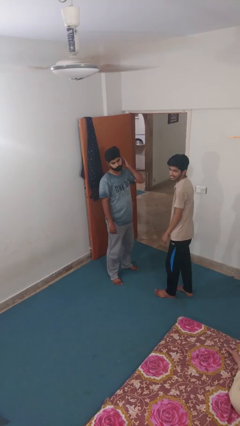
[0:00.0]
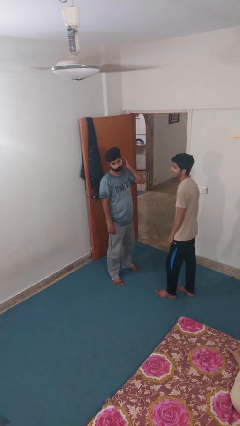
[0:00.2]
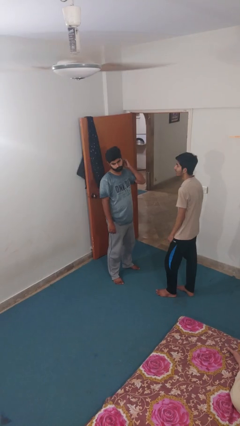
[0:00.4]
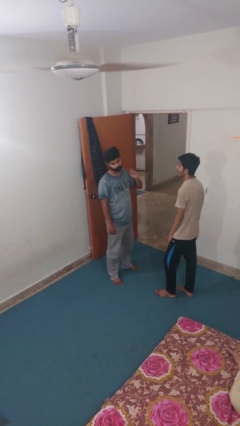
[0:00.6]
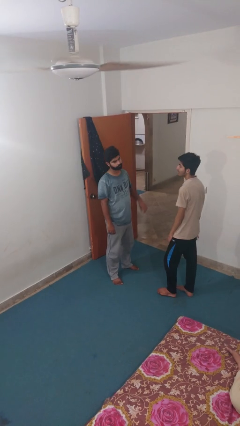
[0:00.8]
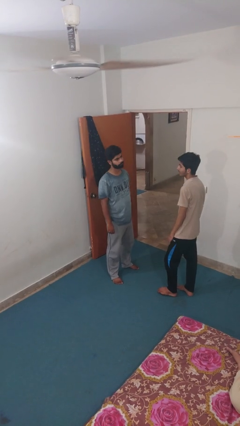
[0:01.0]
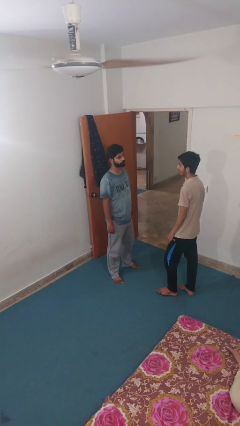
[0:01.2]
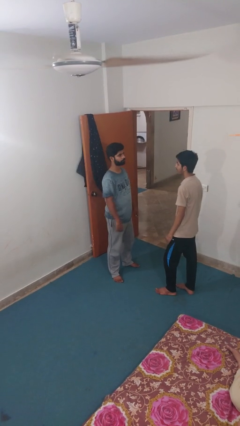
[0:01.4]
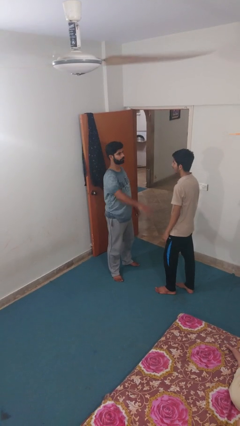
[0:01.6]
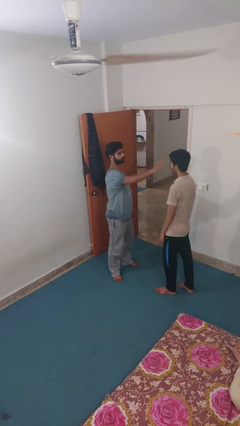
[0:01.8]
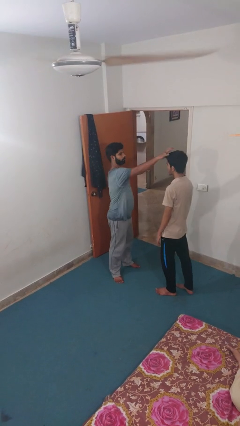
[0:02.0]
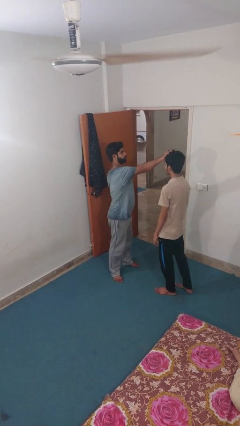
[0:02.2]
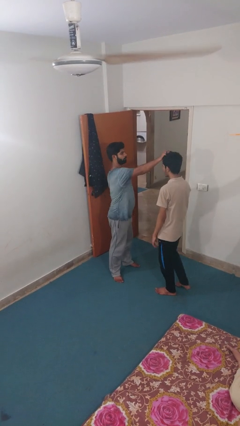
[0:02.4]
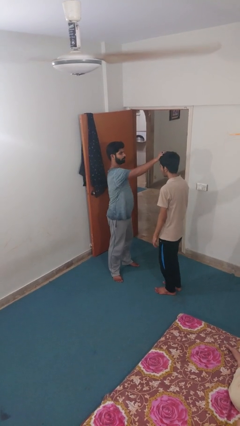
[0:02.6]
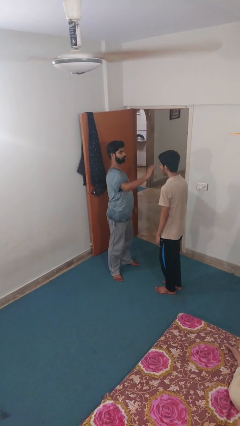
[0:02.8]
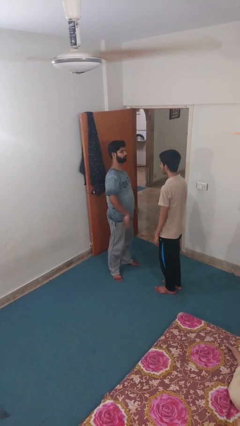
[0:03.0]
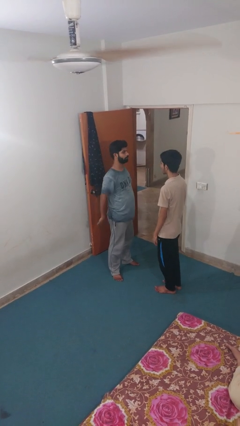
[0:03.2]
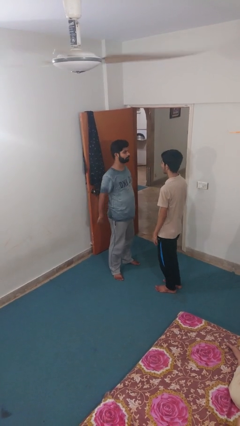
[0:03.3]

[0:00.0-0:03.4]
person grabs person by hair

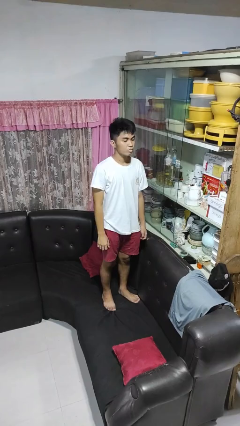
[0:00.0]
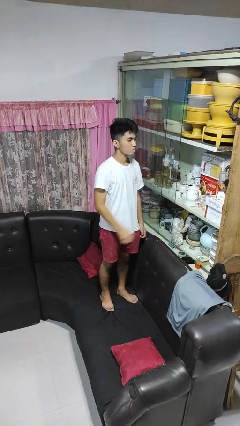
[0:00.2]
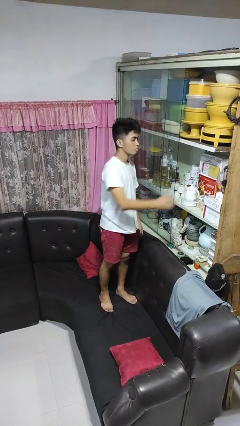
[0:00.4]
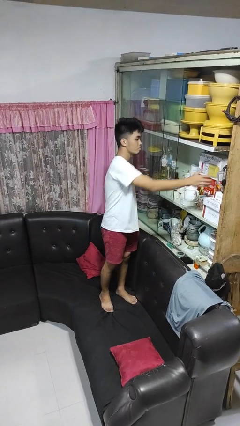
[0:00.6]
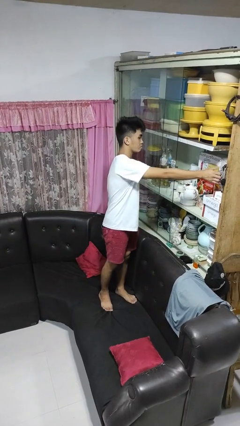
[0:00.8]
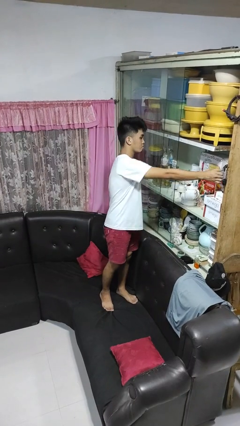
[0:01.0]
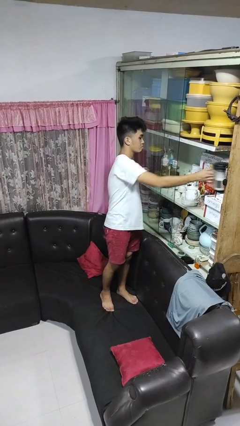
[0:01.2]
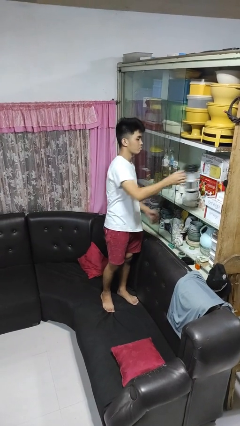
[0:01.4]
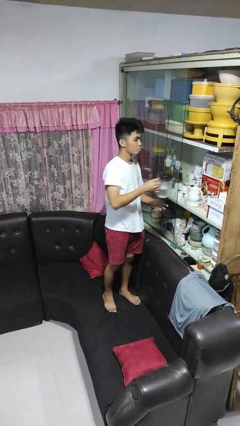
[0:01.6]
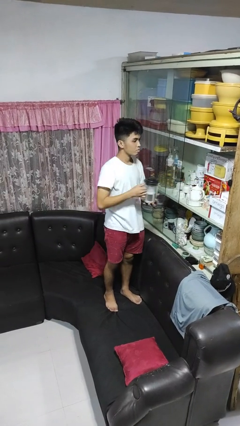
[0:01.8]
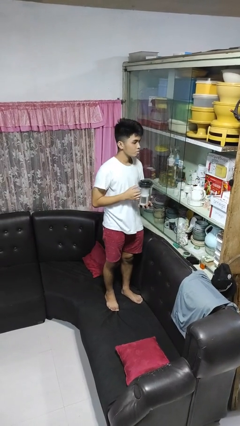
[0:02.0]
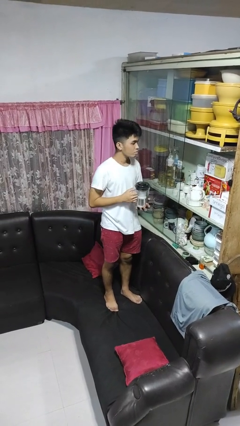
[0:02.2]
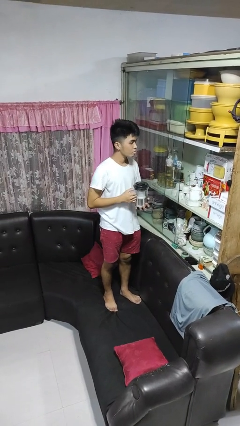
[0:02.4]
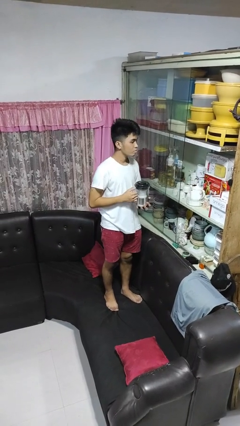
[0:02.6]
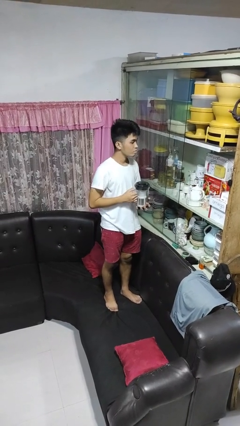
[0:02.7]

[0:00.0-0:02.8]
person picks up object from cabinet

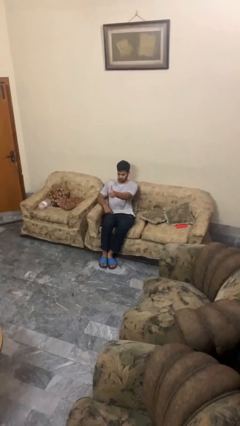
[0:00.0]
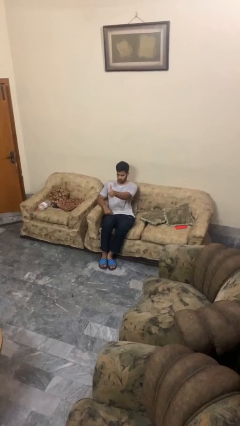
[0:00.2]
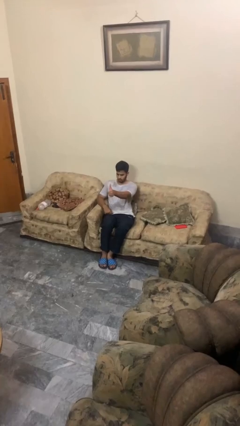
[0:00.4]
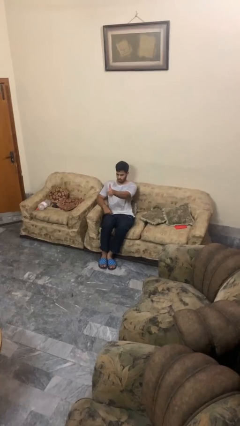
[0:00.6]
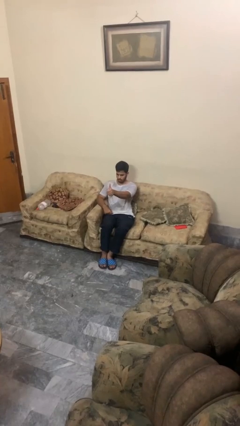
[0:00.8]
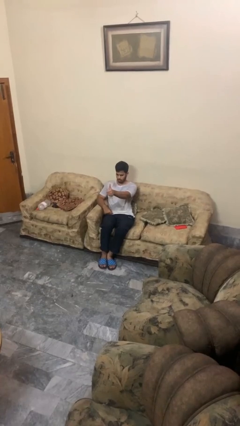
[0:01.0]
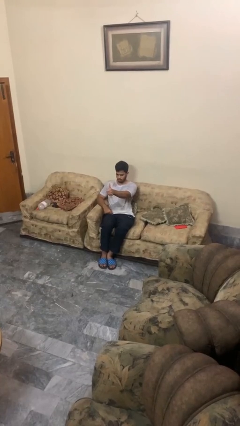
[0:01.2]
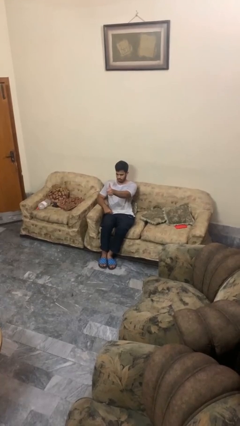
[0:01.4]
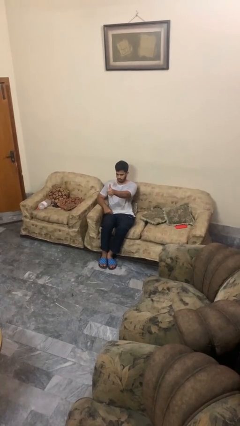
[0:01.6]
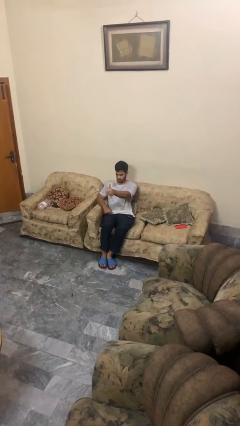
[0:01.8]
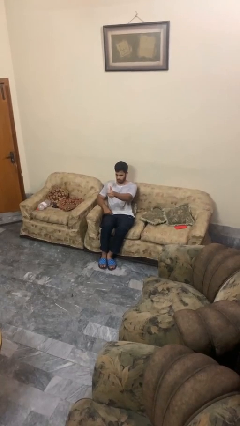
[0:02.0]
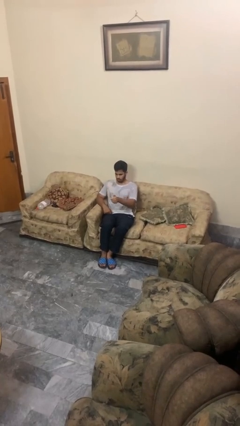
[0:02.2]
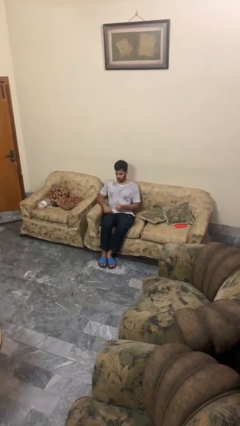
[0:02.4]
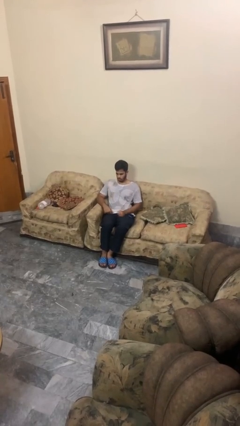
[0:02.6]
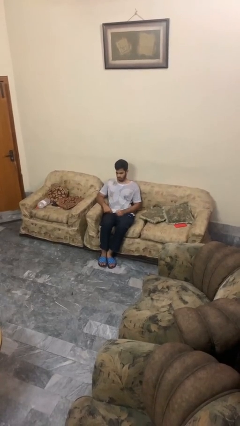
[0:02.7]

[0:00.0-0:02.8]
person gestures thumbs up

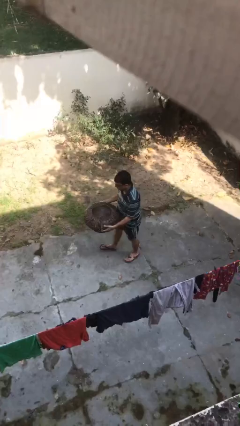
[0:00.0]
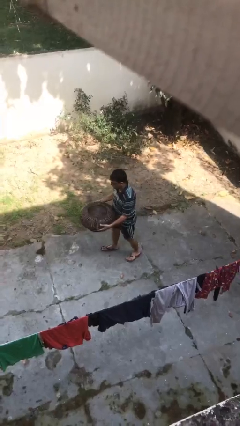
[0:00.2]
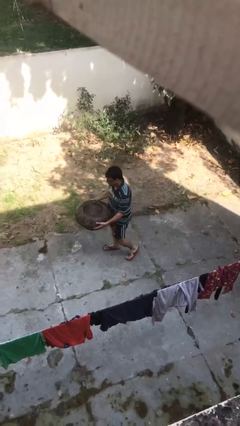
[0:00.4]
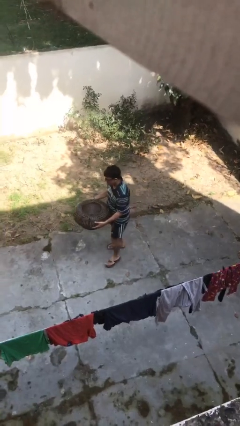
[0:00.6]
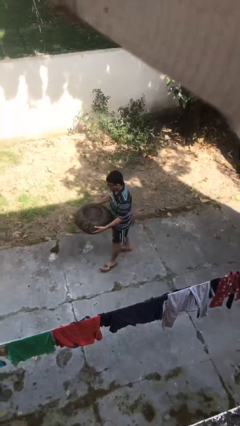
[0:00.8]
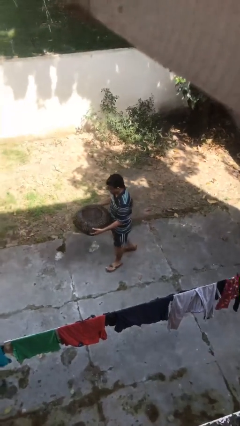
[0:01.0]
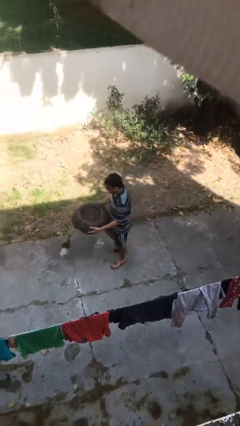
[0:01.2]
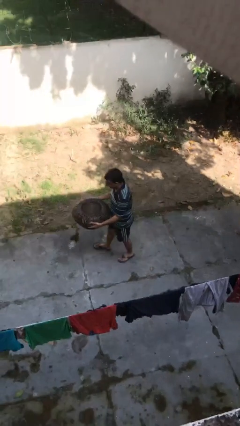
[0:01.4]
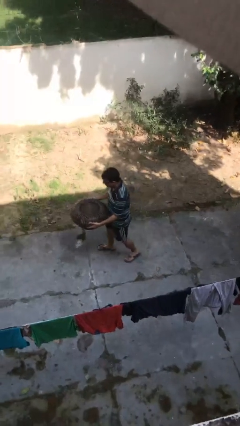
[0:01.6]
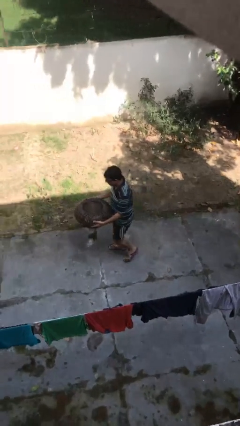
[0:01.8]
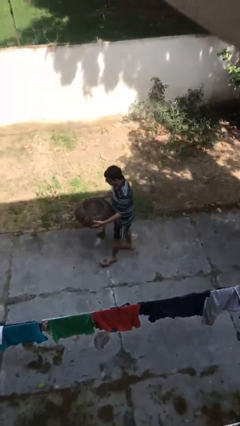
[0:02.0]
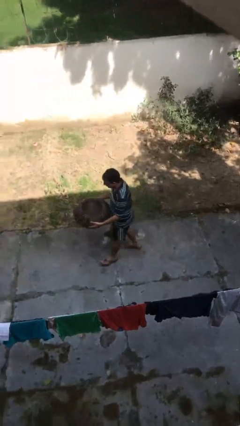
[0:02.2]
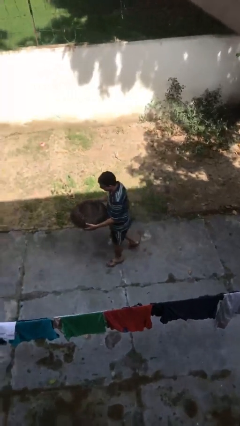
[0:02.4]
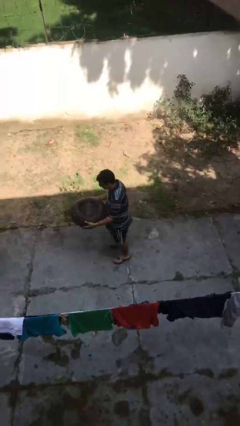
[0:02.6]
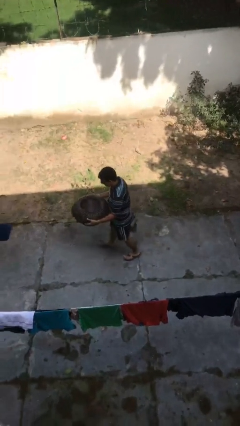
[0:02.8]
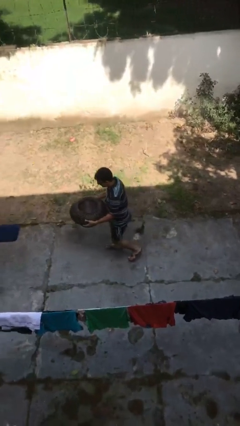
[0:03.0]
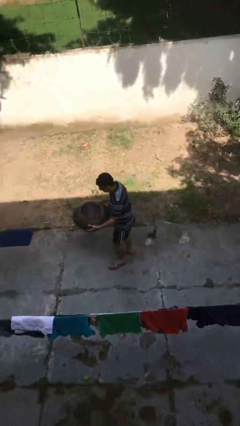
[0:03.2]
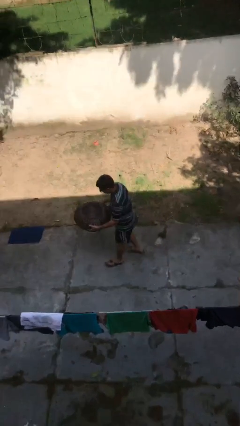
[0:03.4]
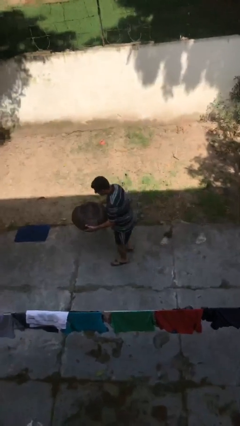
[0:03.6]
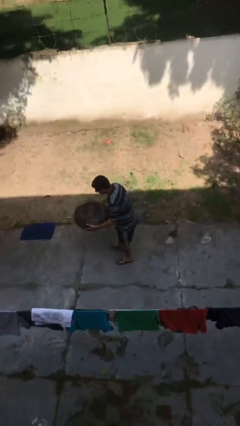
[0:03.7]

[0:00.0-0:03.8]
person carries heavy object

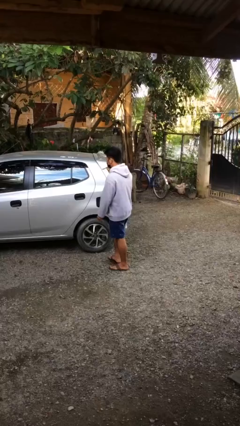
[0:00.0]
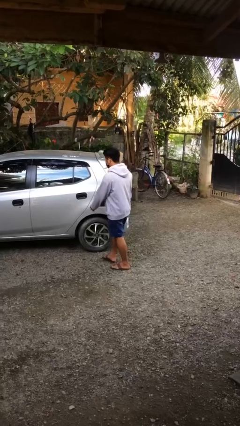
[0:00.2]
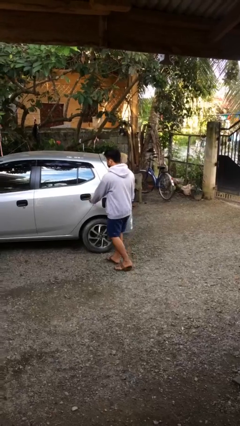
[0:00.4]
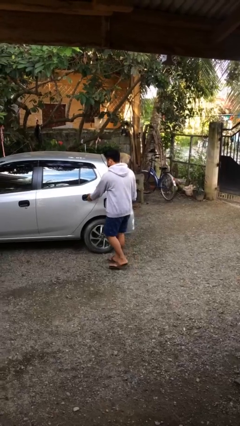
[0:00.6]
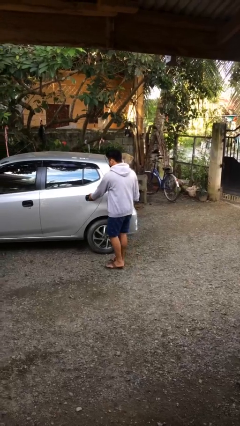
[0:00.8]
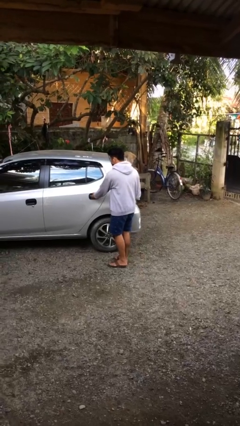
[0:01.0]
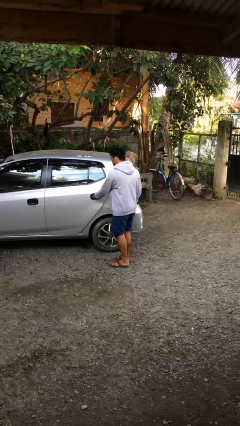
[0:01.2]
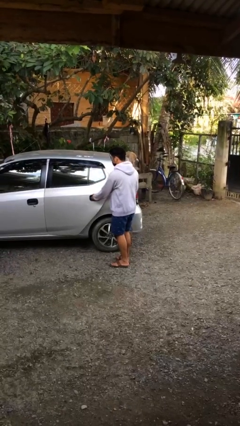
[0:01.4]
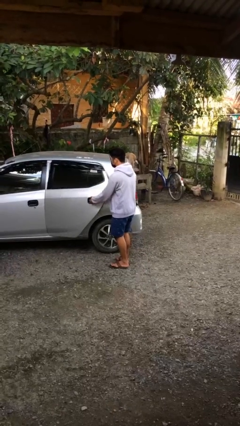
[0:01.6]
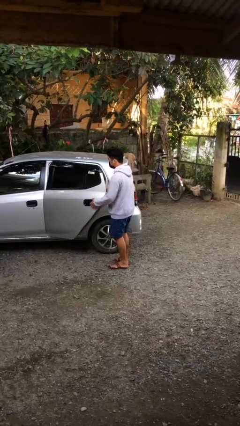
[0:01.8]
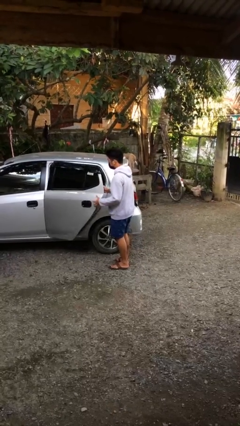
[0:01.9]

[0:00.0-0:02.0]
person opens car door

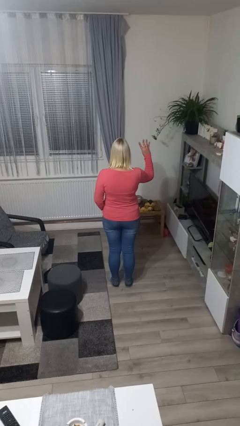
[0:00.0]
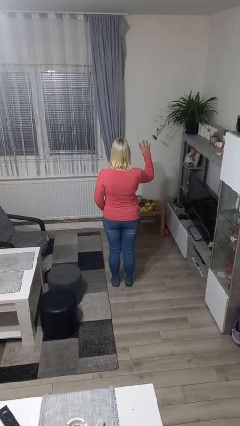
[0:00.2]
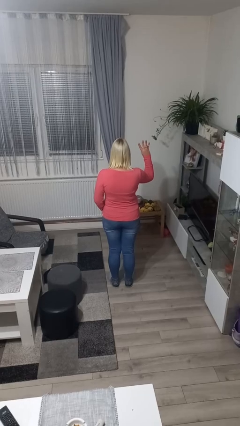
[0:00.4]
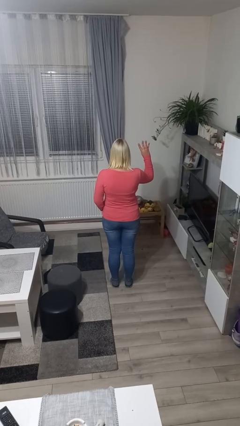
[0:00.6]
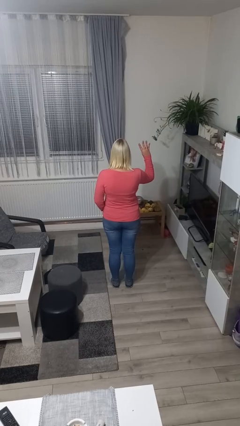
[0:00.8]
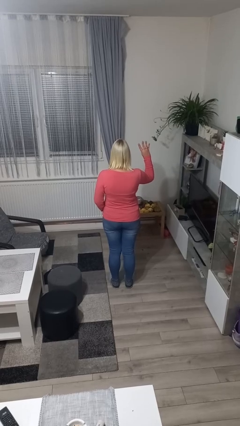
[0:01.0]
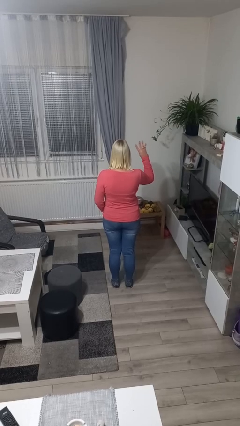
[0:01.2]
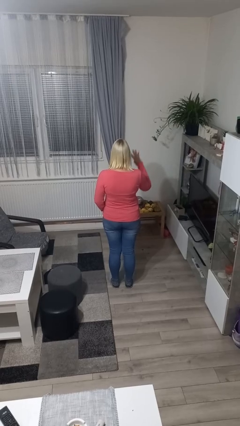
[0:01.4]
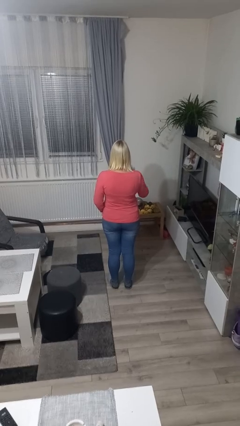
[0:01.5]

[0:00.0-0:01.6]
person gestures number four

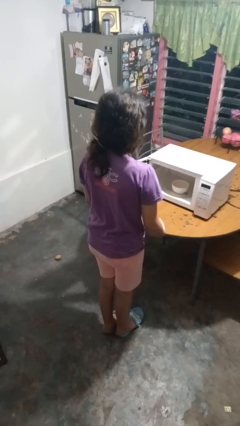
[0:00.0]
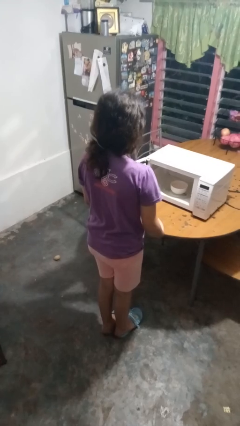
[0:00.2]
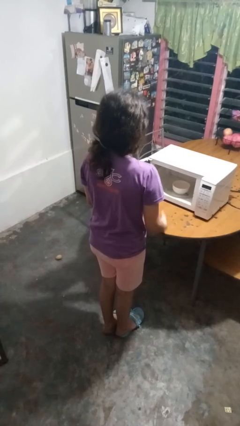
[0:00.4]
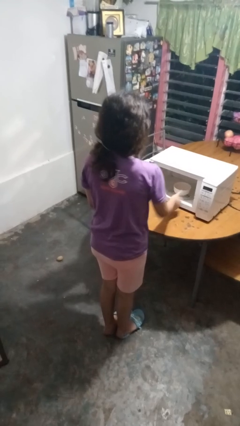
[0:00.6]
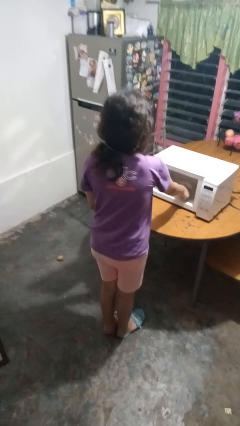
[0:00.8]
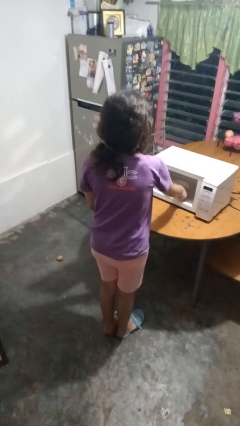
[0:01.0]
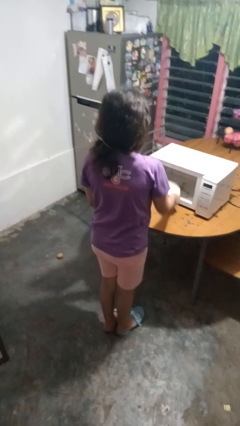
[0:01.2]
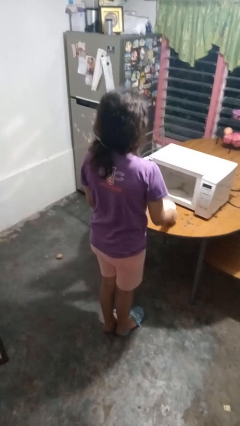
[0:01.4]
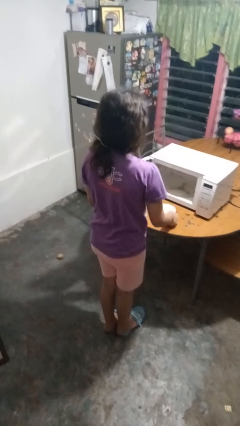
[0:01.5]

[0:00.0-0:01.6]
person takes object from microwave
